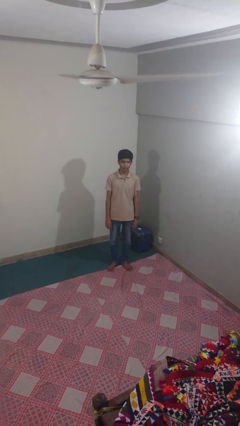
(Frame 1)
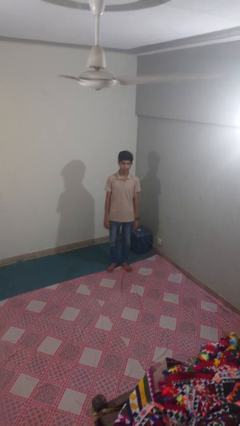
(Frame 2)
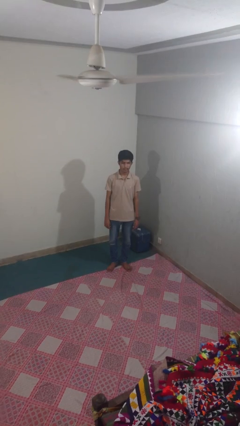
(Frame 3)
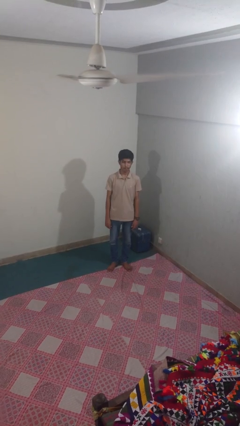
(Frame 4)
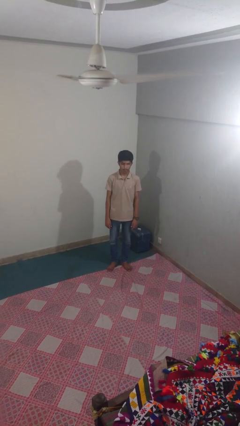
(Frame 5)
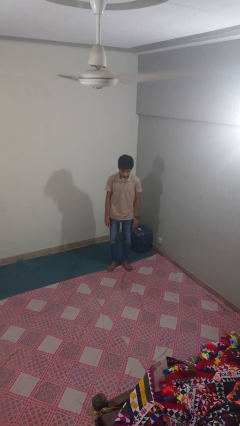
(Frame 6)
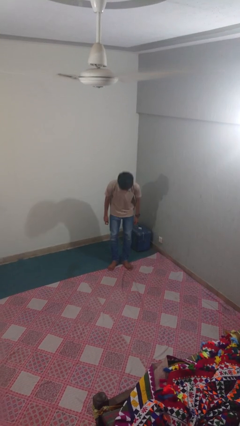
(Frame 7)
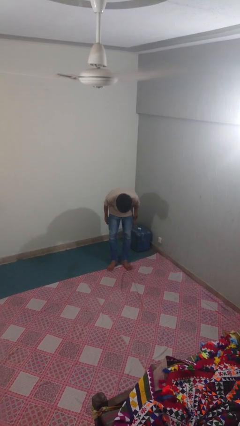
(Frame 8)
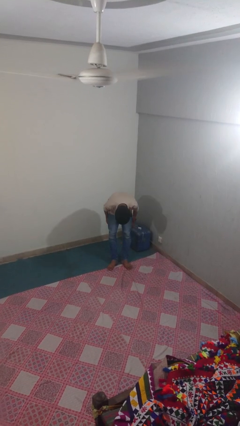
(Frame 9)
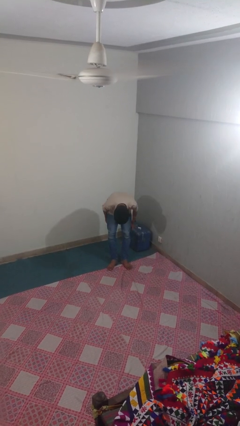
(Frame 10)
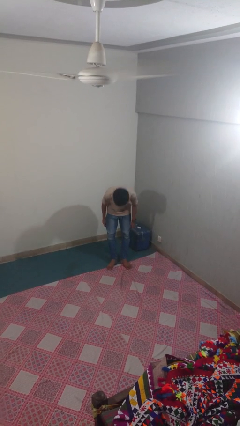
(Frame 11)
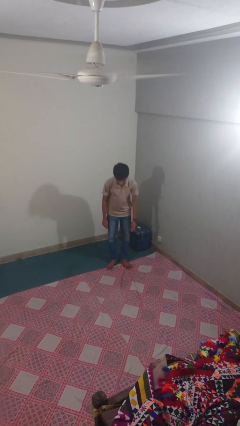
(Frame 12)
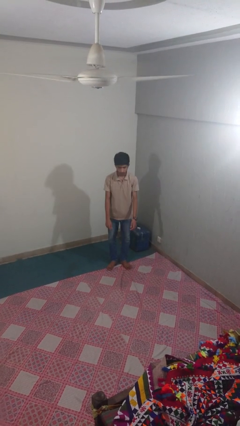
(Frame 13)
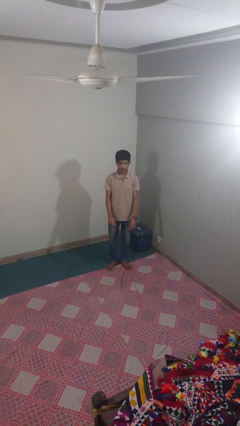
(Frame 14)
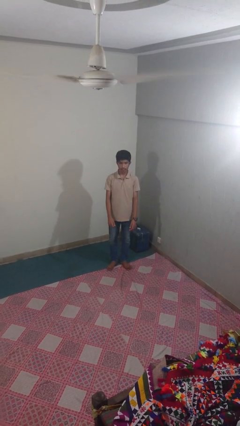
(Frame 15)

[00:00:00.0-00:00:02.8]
person bows

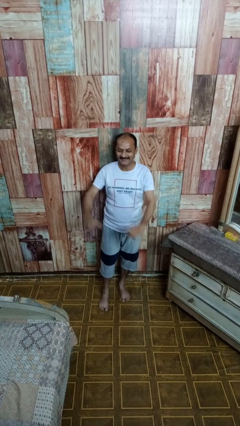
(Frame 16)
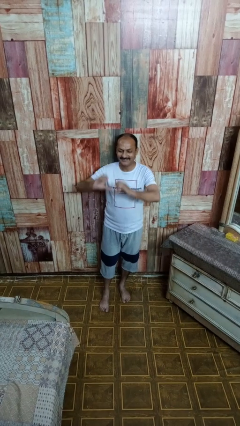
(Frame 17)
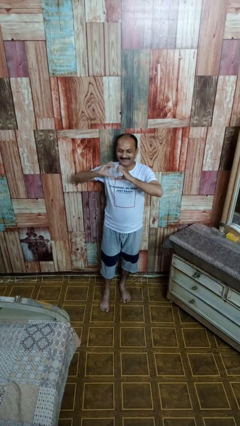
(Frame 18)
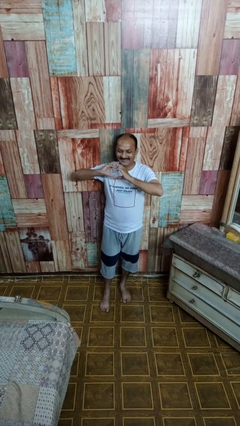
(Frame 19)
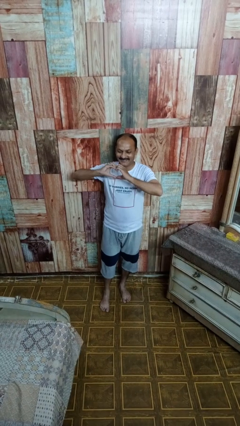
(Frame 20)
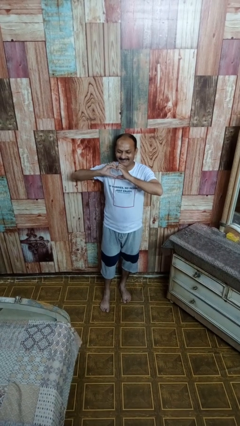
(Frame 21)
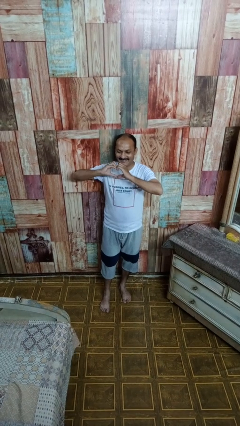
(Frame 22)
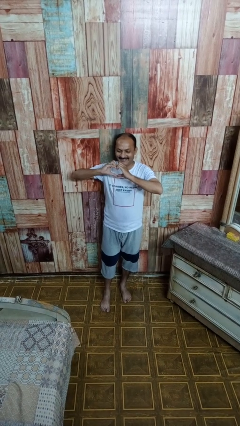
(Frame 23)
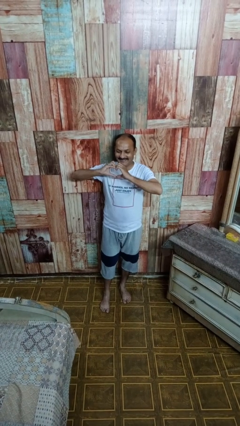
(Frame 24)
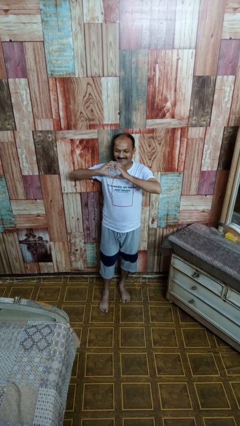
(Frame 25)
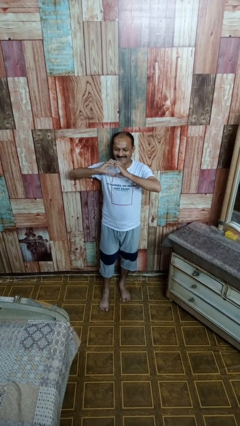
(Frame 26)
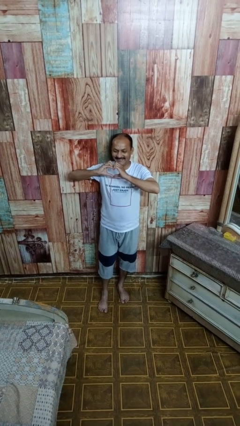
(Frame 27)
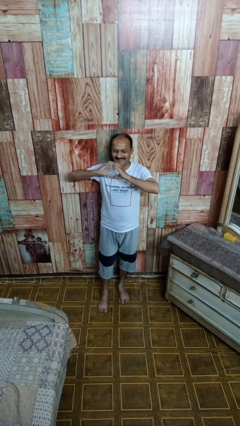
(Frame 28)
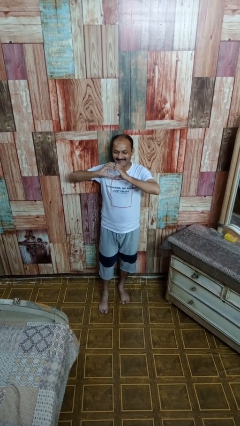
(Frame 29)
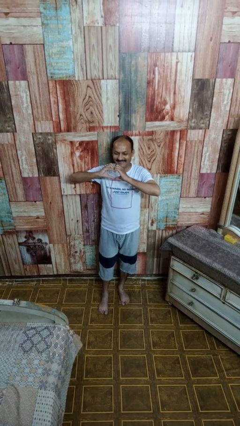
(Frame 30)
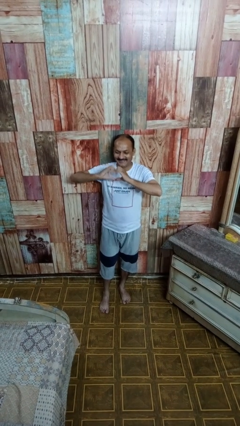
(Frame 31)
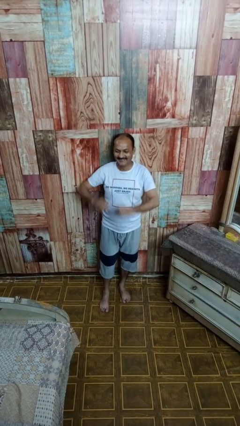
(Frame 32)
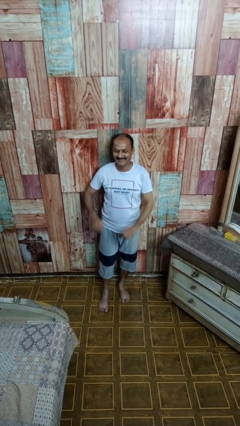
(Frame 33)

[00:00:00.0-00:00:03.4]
person gestures heart

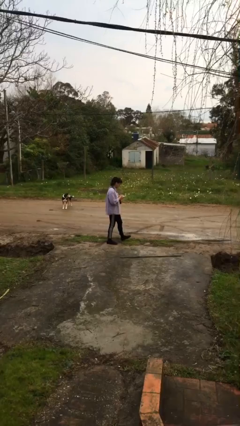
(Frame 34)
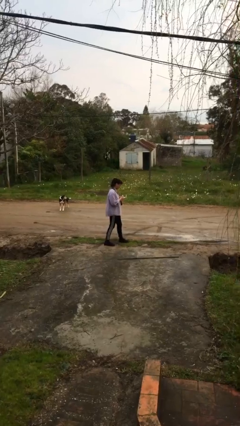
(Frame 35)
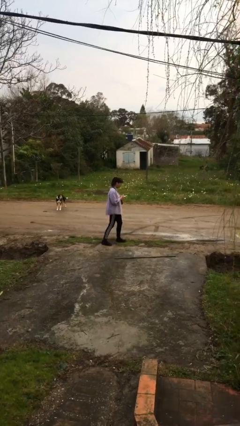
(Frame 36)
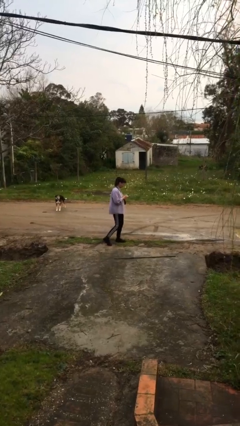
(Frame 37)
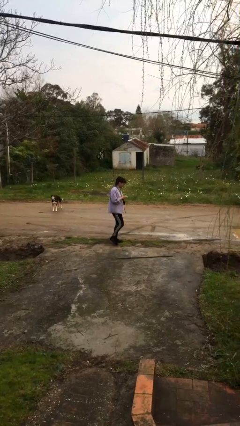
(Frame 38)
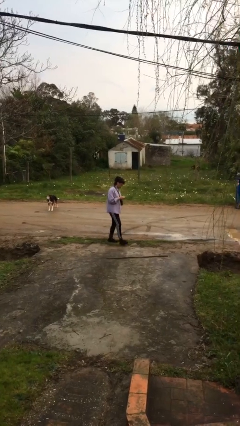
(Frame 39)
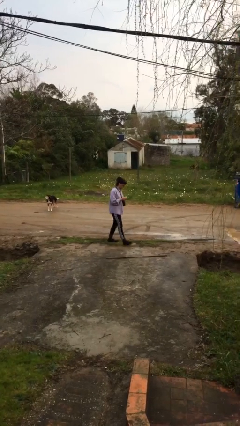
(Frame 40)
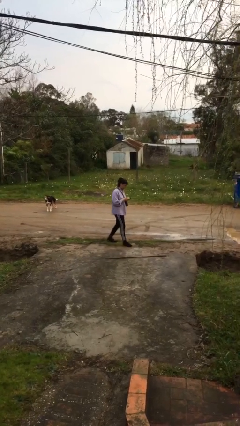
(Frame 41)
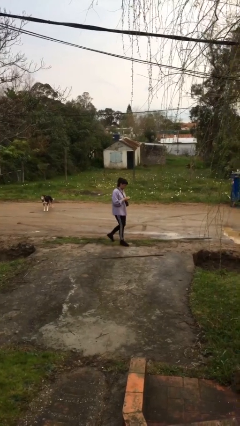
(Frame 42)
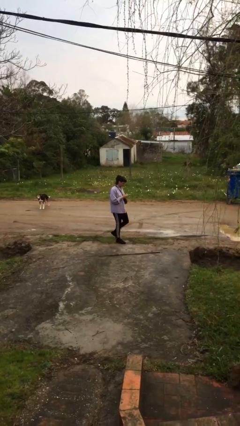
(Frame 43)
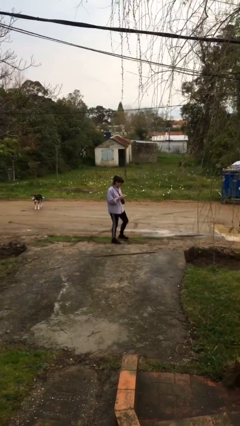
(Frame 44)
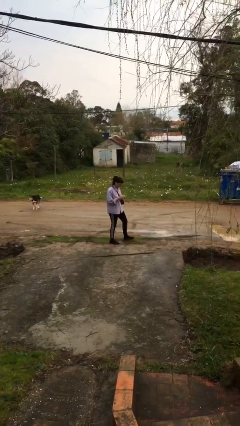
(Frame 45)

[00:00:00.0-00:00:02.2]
person texts on phone

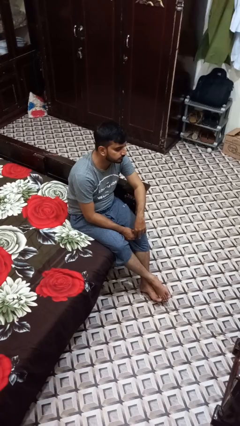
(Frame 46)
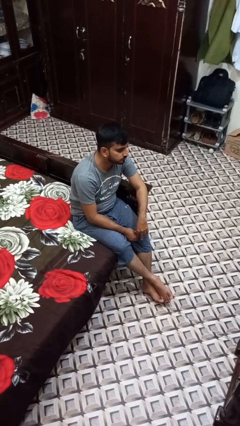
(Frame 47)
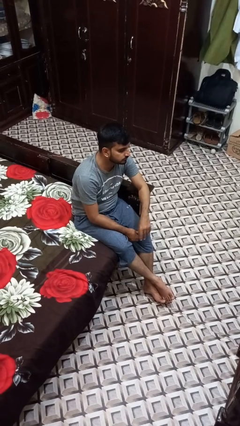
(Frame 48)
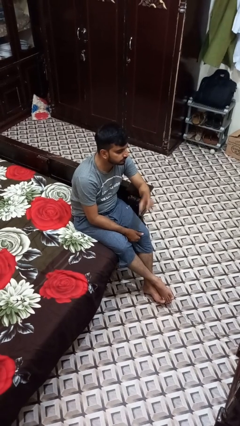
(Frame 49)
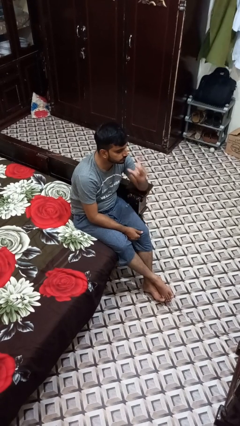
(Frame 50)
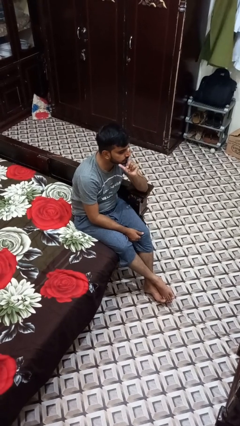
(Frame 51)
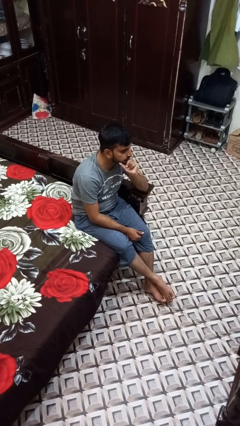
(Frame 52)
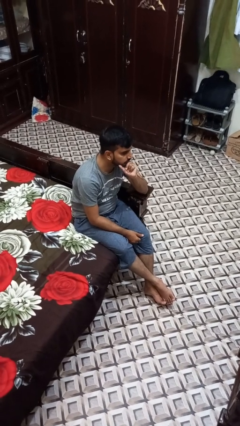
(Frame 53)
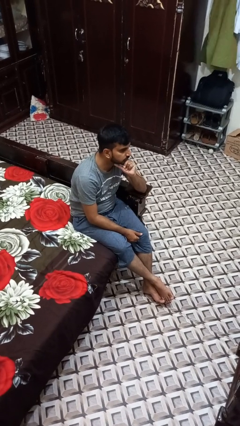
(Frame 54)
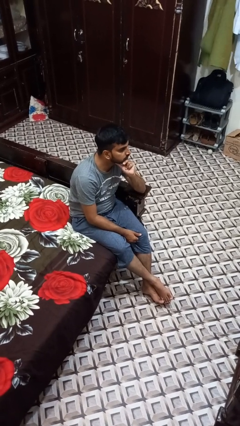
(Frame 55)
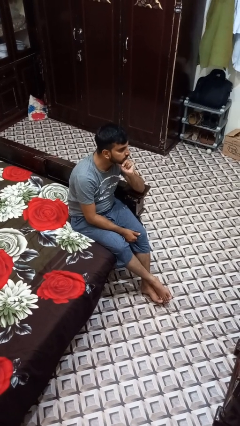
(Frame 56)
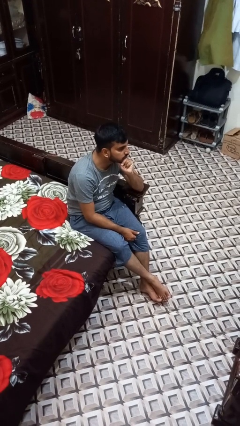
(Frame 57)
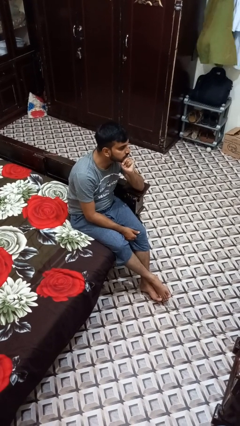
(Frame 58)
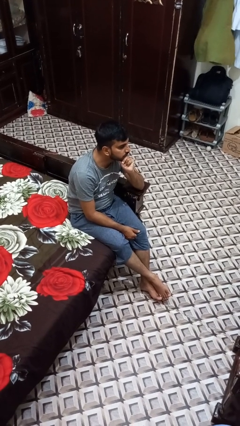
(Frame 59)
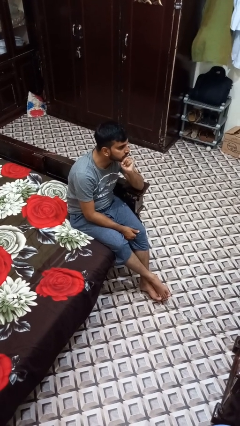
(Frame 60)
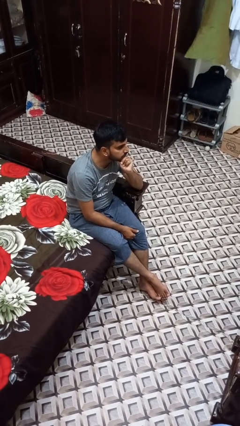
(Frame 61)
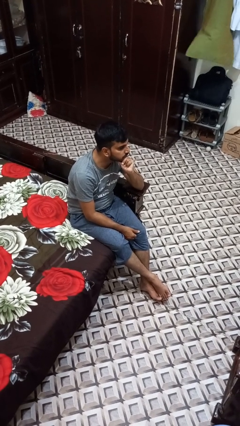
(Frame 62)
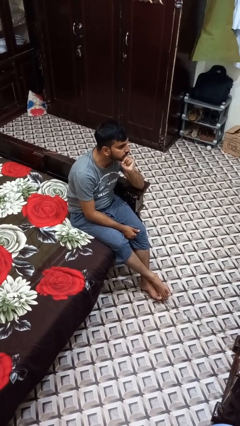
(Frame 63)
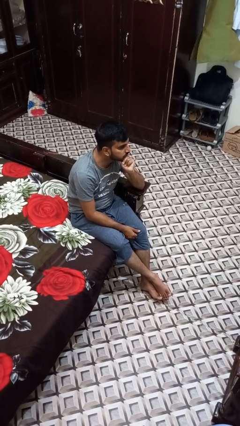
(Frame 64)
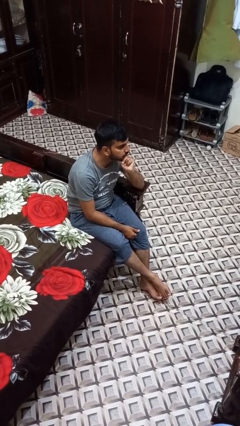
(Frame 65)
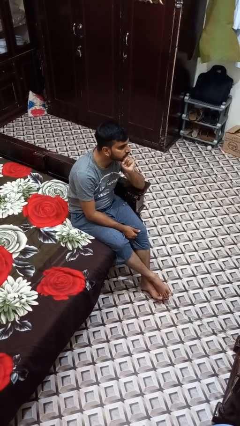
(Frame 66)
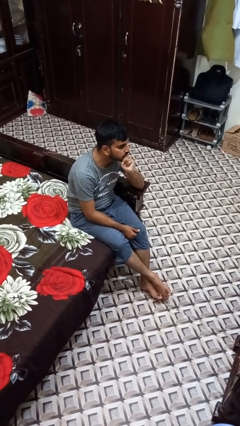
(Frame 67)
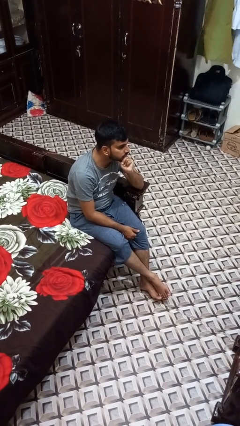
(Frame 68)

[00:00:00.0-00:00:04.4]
person strokes chin

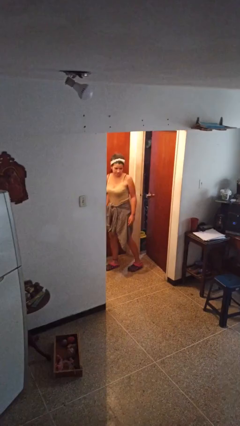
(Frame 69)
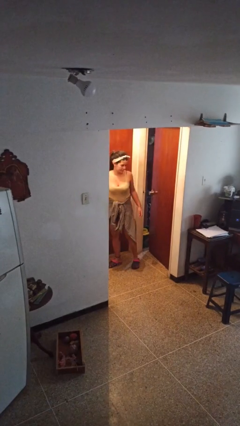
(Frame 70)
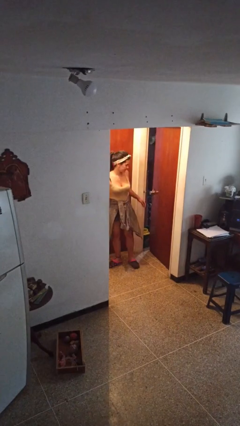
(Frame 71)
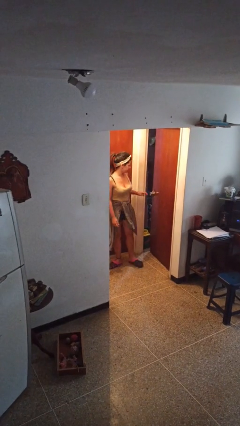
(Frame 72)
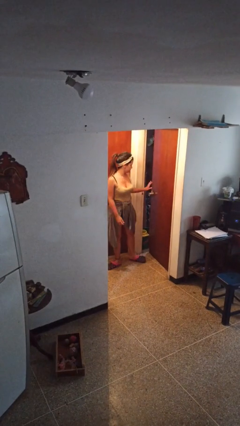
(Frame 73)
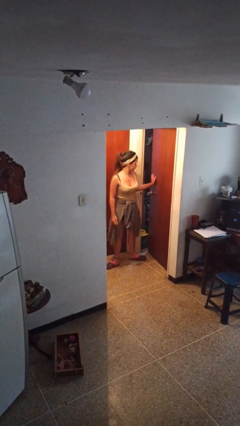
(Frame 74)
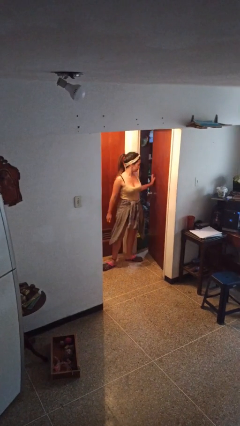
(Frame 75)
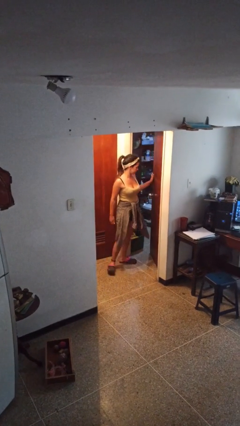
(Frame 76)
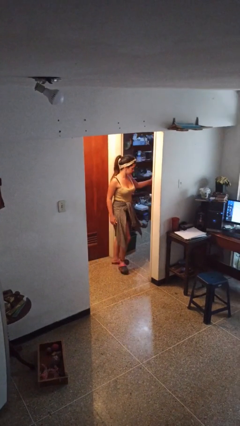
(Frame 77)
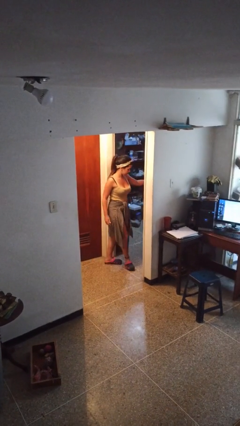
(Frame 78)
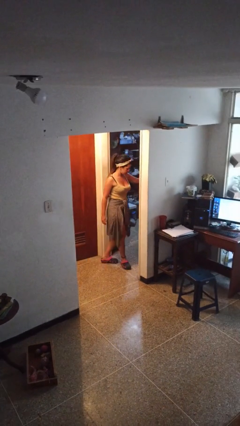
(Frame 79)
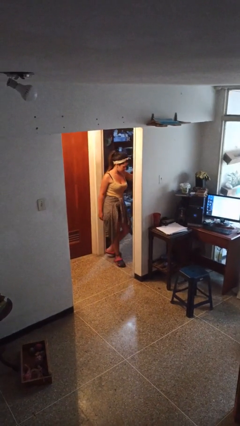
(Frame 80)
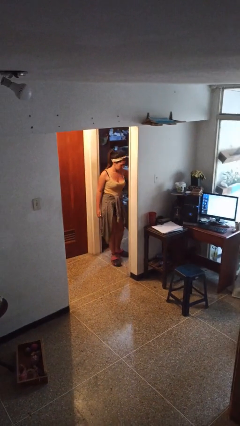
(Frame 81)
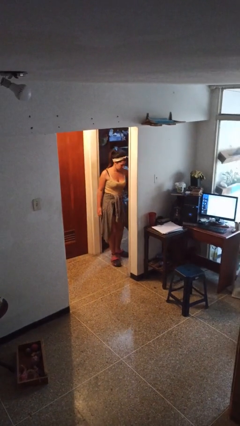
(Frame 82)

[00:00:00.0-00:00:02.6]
person opens facility door

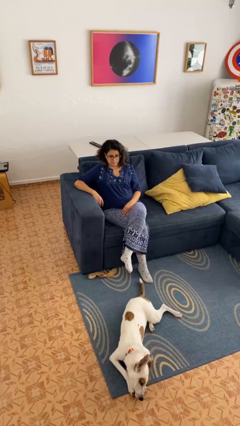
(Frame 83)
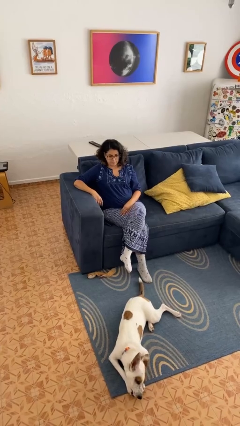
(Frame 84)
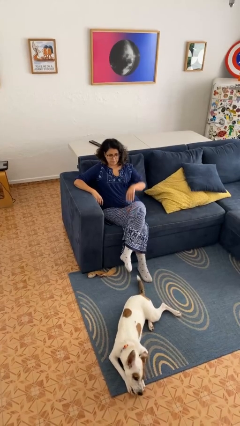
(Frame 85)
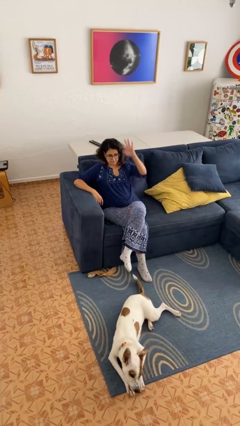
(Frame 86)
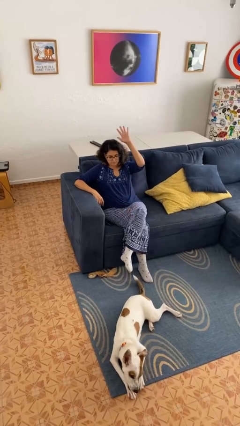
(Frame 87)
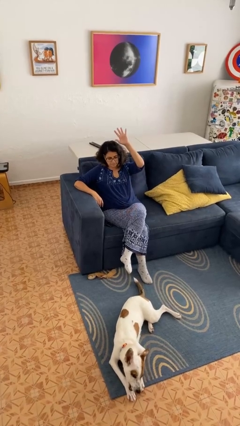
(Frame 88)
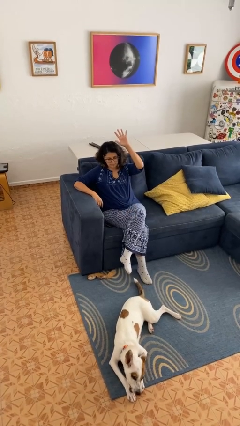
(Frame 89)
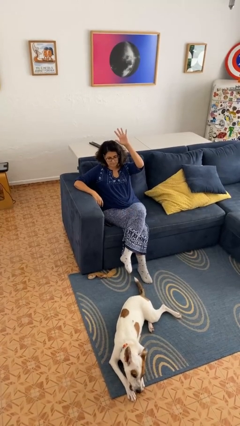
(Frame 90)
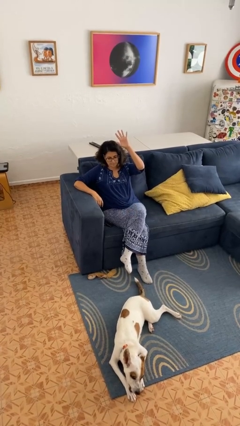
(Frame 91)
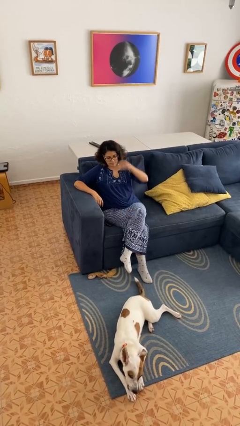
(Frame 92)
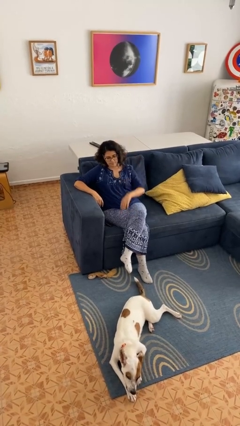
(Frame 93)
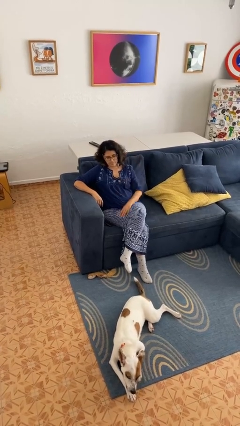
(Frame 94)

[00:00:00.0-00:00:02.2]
person gestures number five
